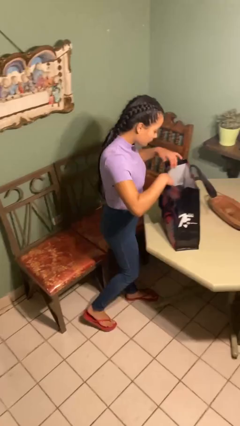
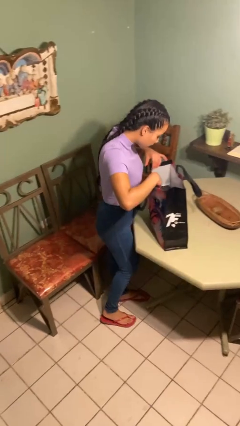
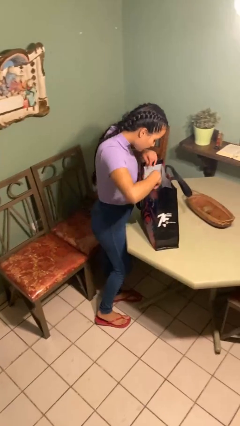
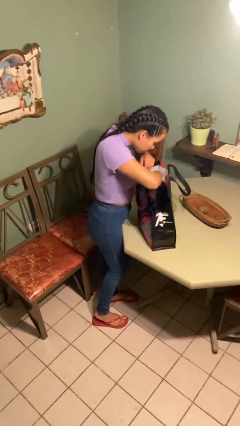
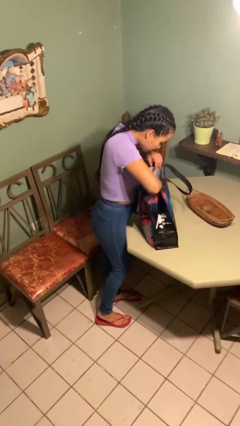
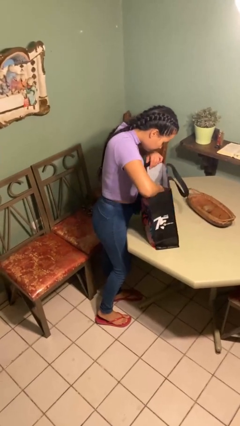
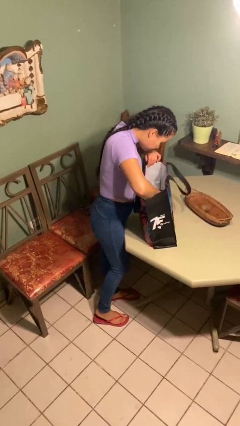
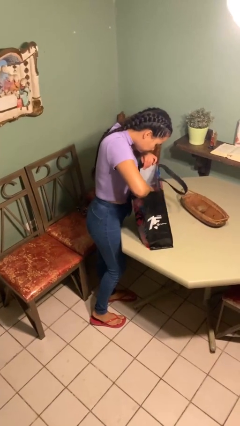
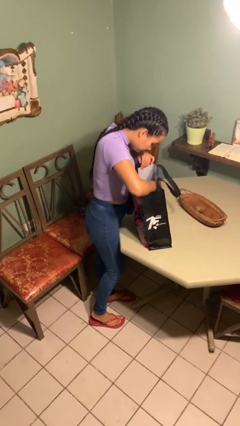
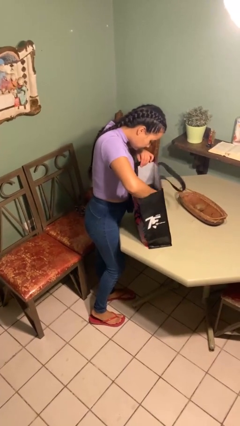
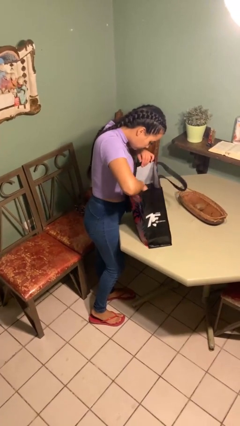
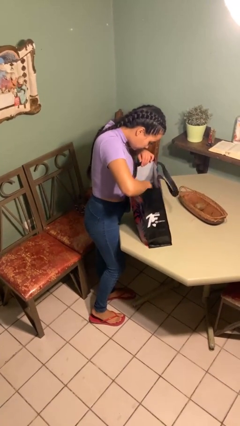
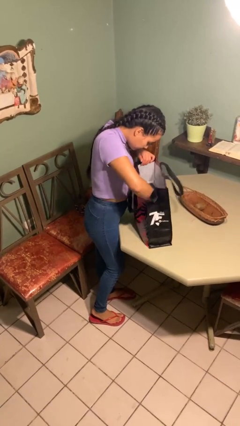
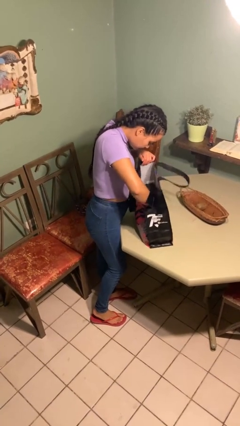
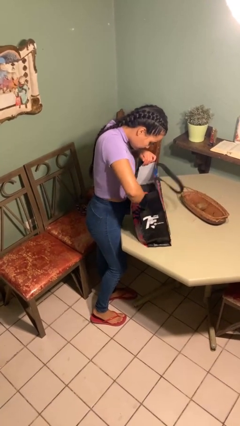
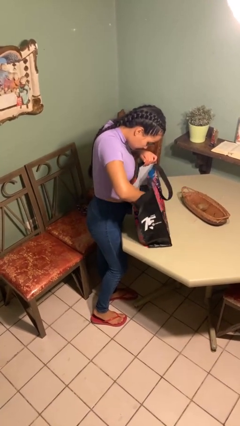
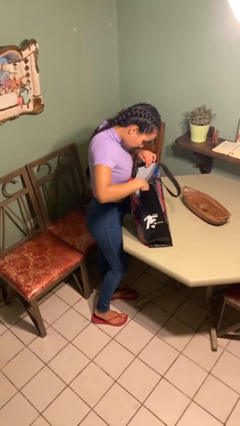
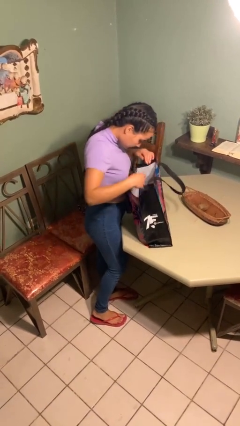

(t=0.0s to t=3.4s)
person searches in bag

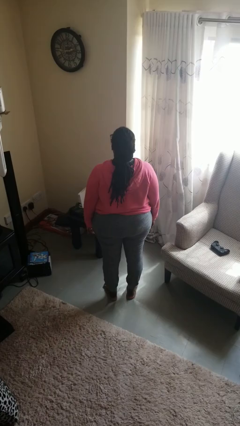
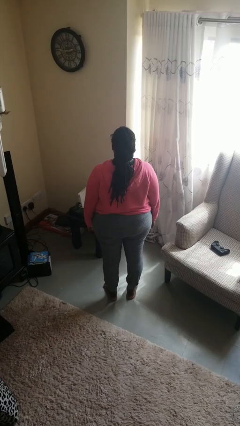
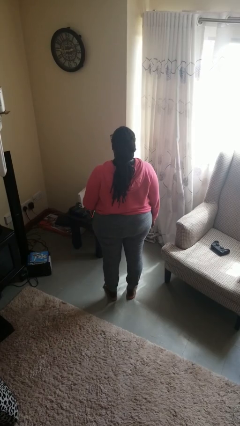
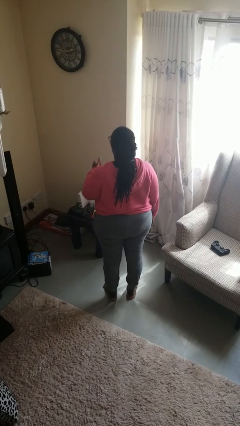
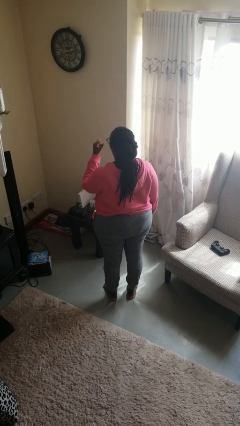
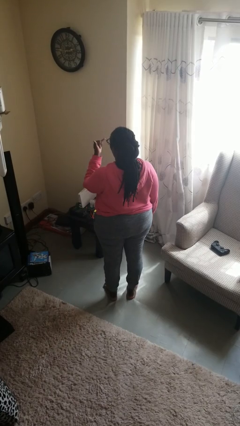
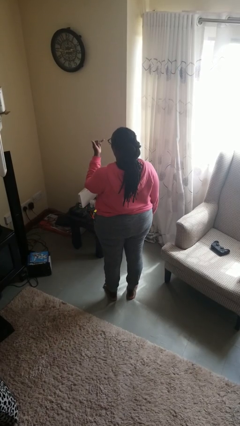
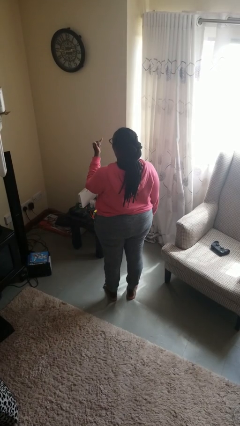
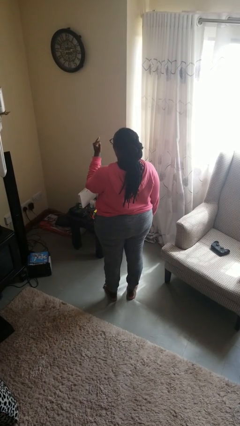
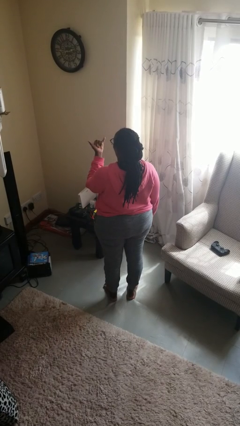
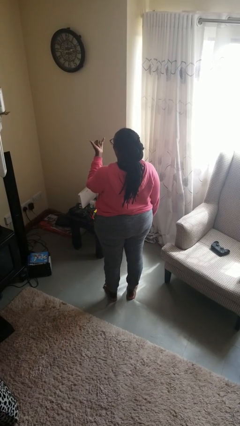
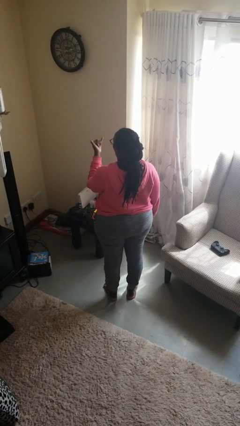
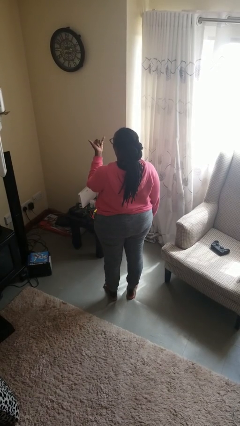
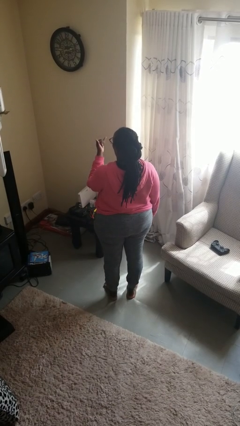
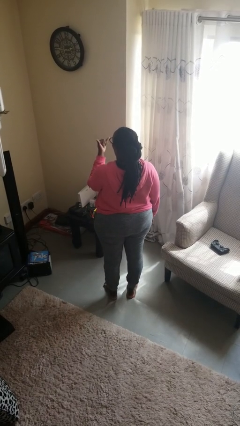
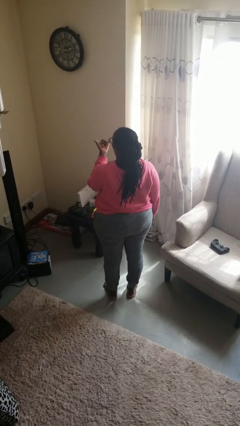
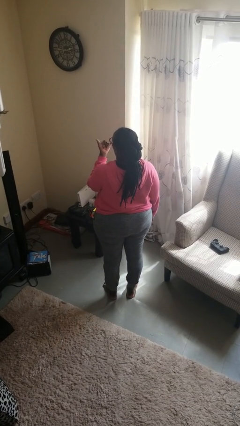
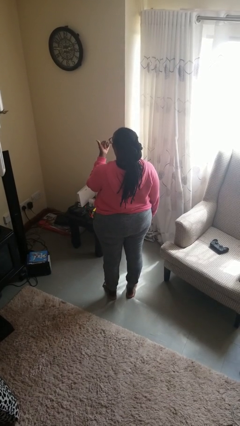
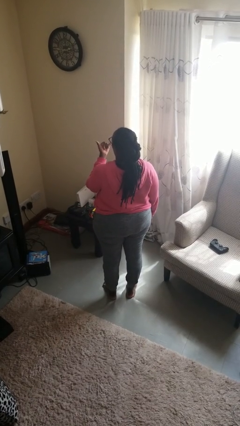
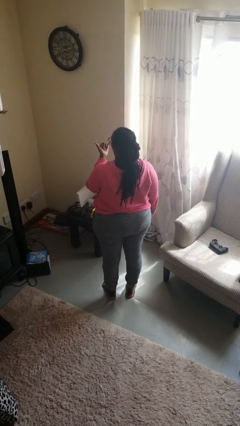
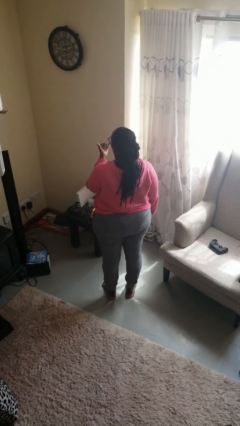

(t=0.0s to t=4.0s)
person gestures hang loose

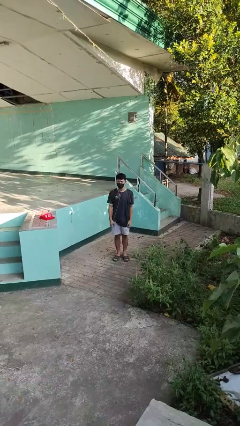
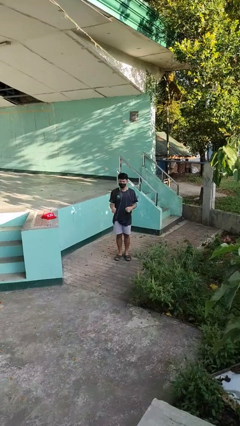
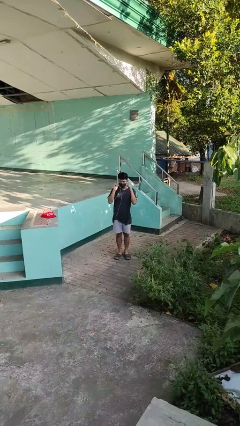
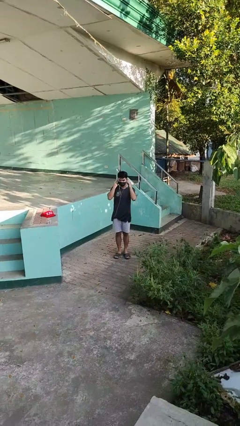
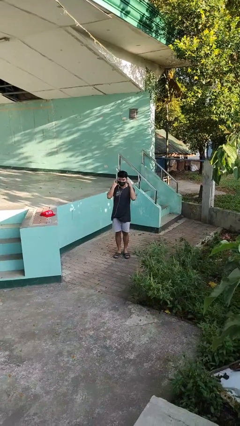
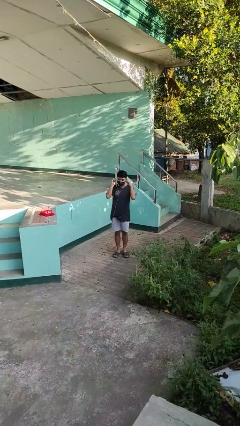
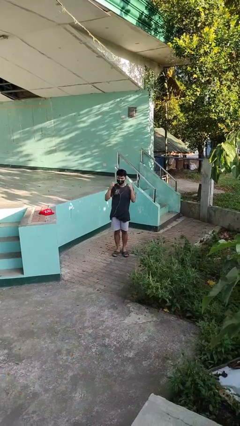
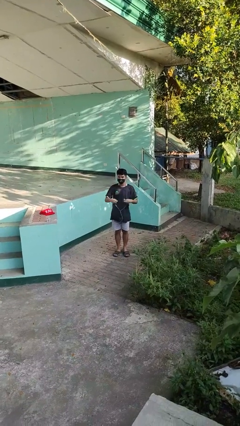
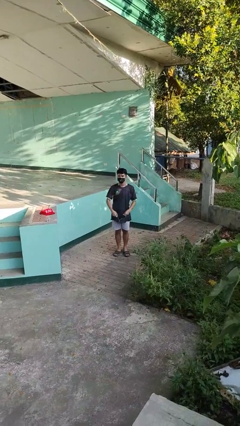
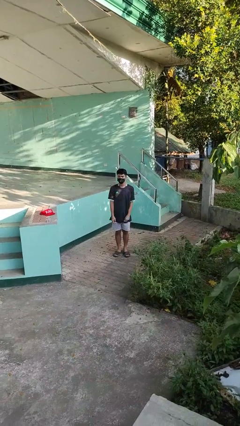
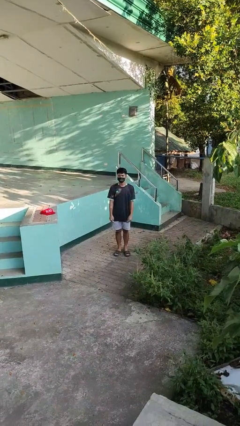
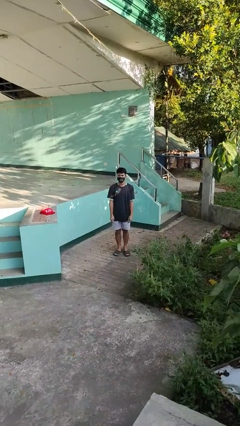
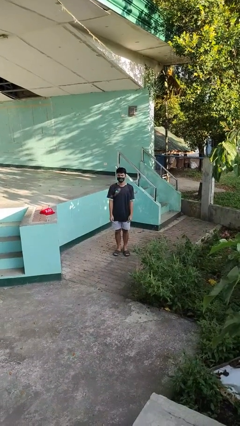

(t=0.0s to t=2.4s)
person takes off headphones

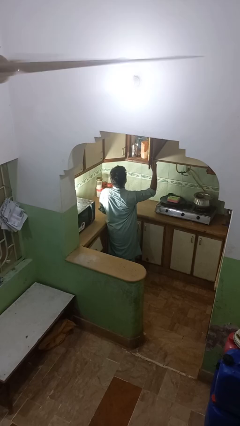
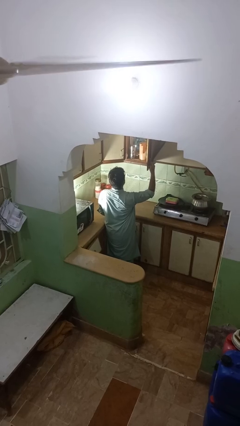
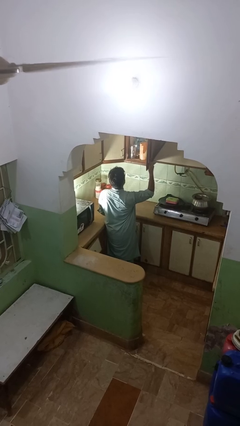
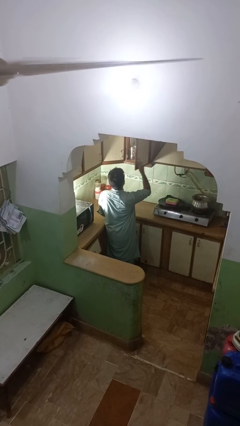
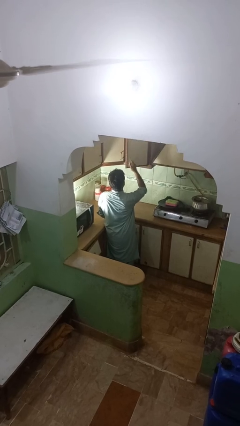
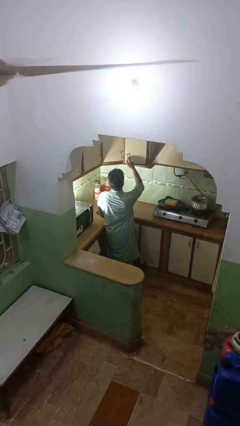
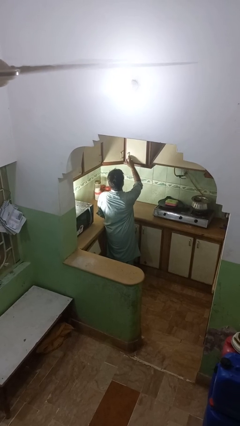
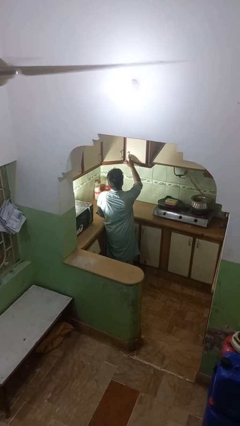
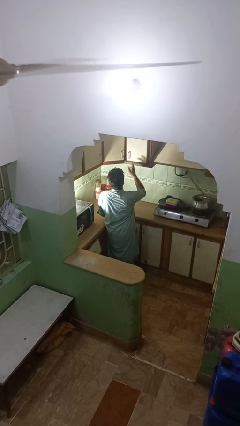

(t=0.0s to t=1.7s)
person closes kitchen drawer

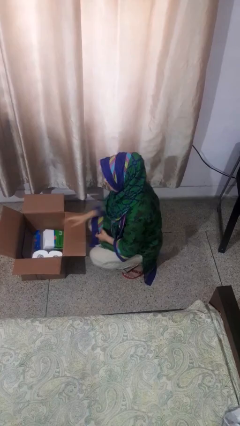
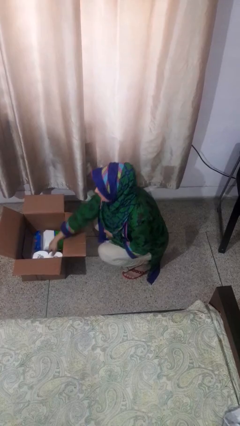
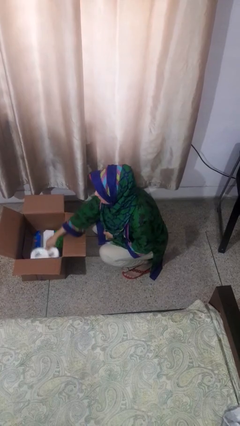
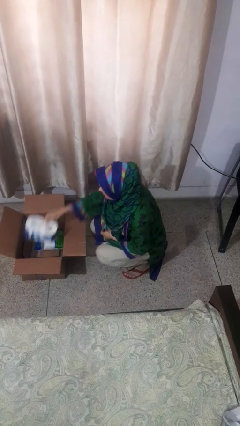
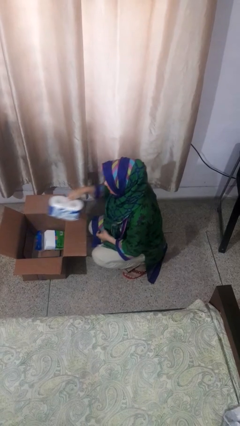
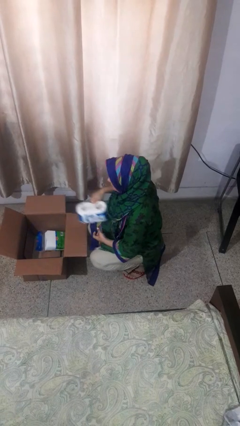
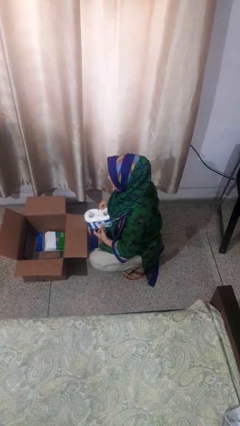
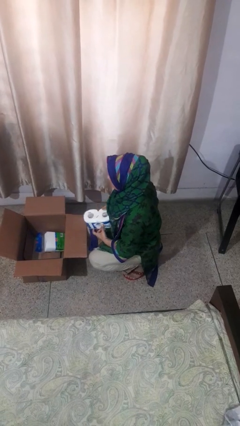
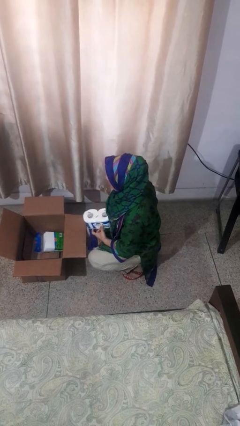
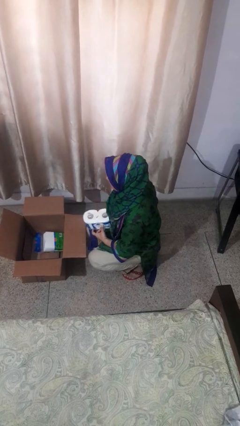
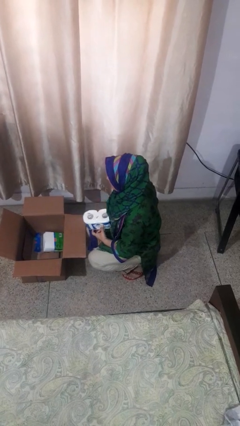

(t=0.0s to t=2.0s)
person takes object from box

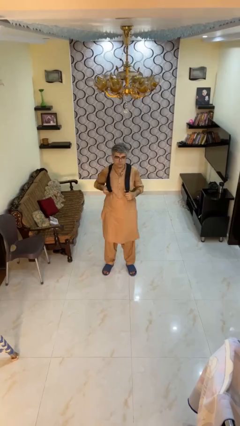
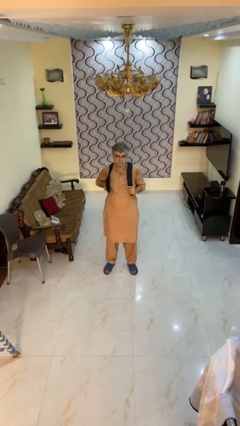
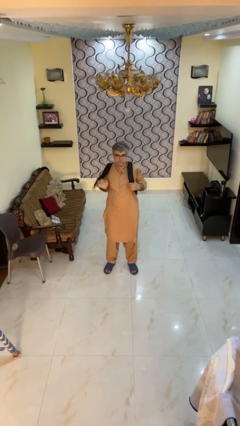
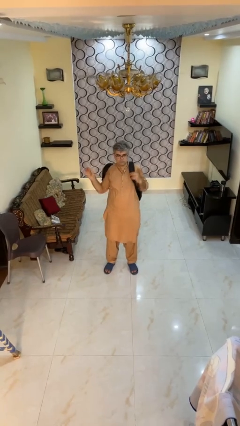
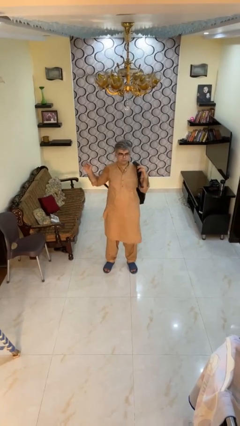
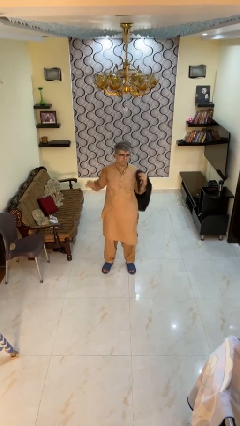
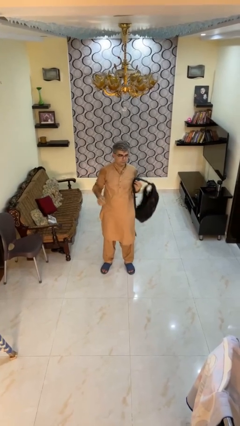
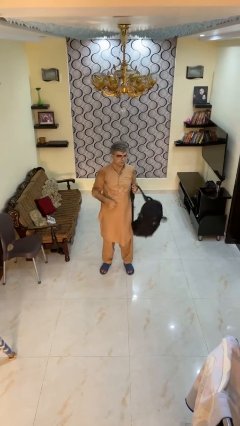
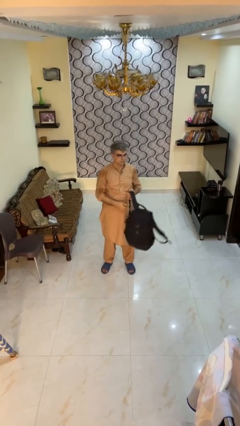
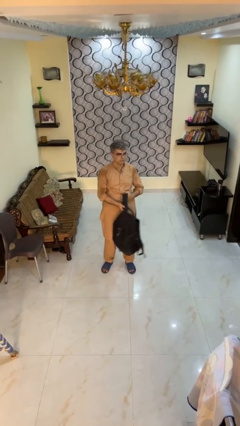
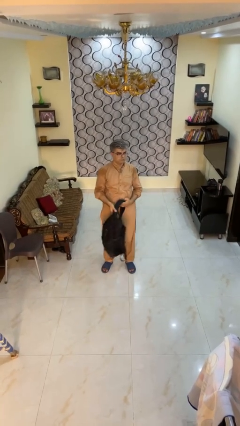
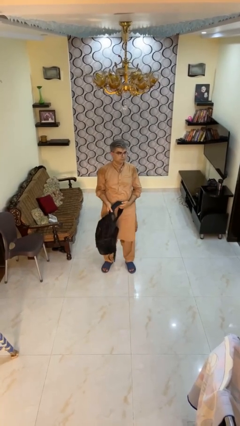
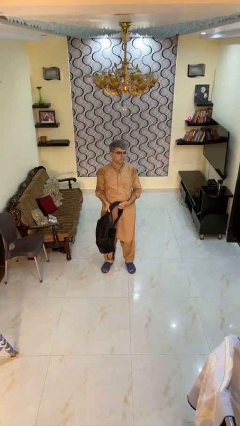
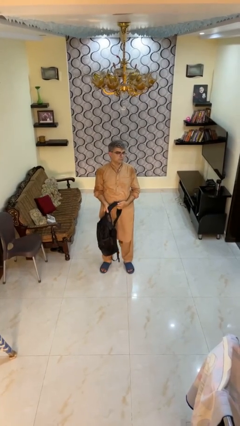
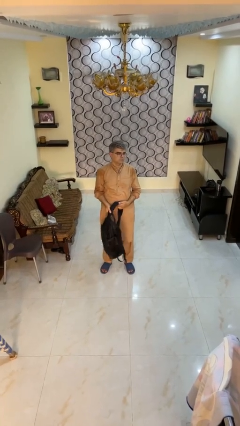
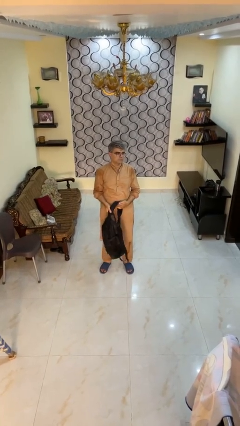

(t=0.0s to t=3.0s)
person takes off backpack

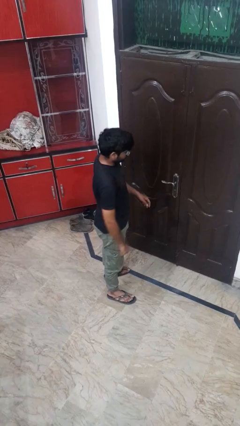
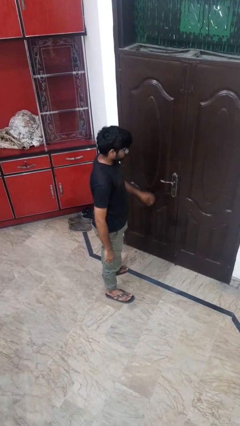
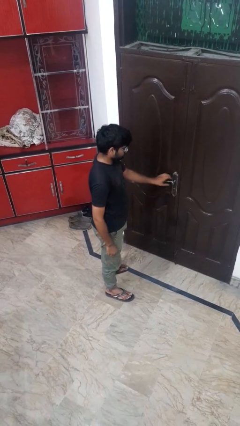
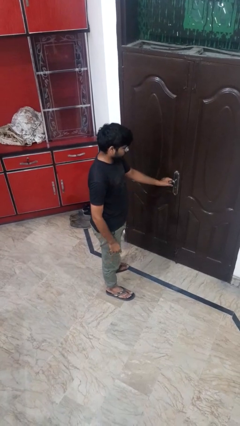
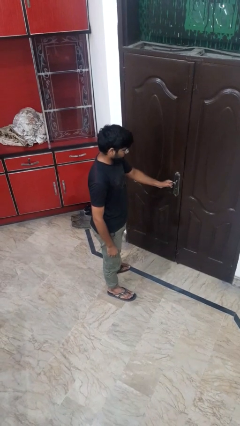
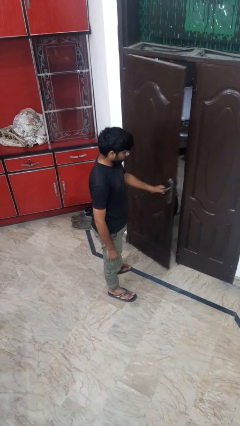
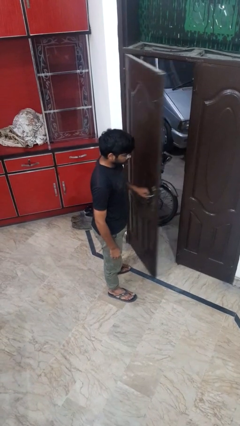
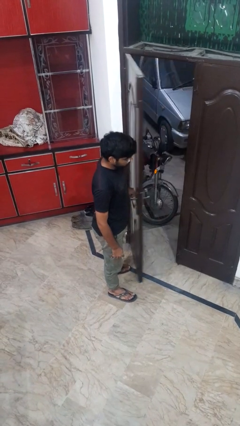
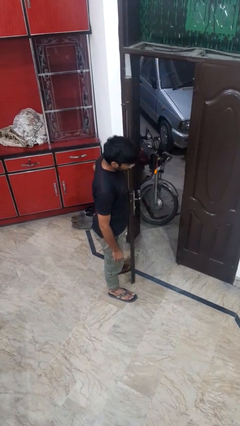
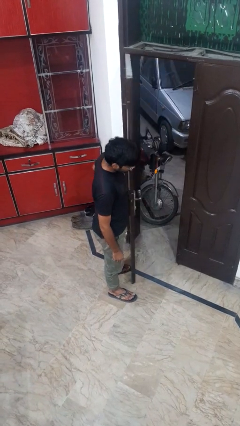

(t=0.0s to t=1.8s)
person opens facility door
